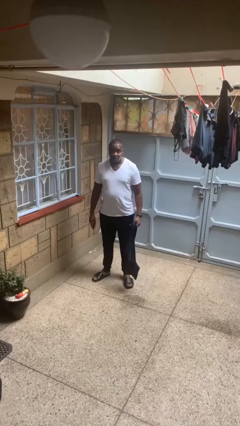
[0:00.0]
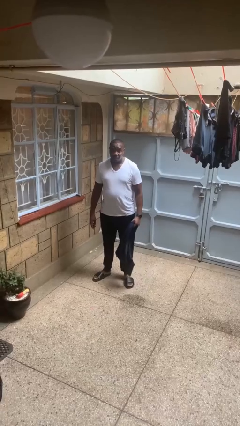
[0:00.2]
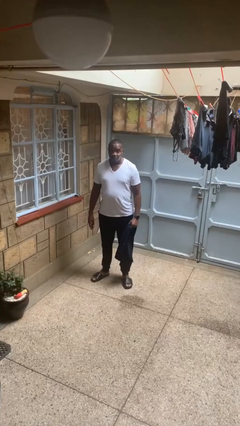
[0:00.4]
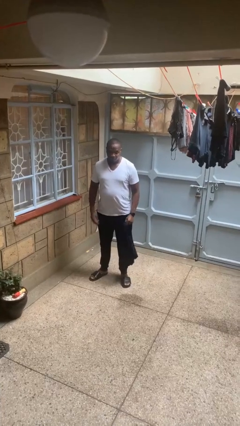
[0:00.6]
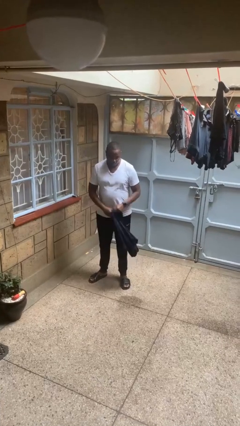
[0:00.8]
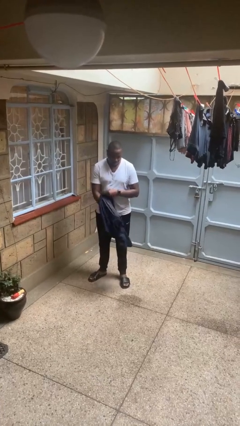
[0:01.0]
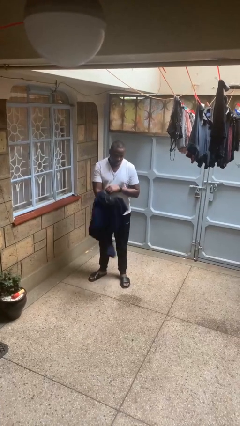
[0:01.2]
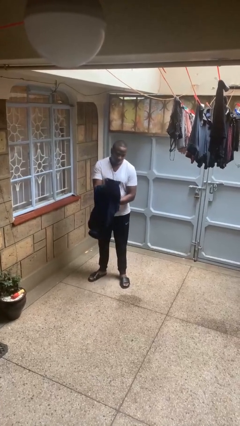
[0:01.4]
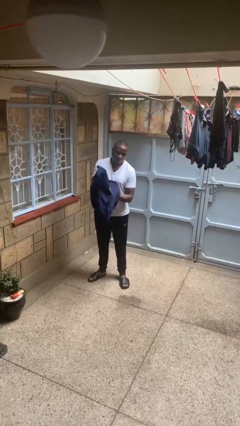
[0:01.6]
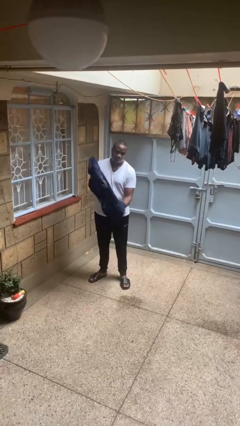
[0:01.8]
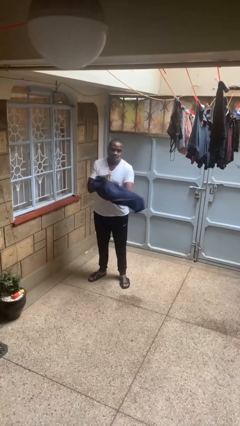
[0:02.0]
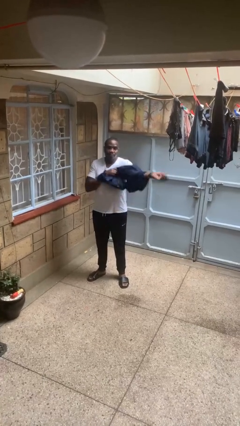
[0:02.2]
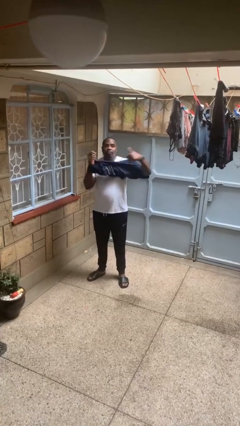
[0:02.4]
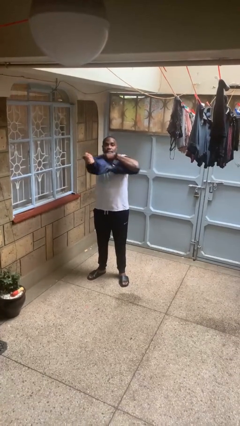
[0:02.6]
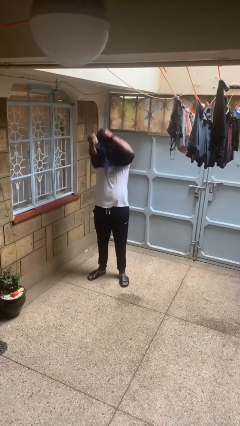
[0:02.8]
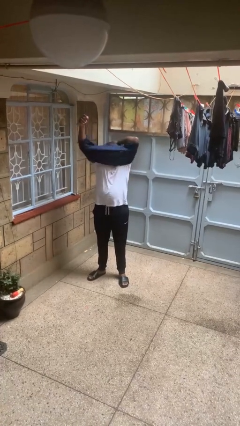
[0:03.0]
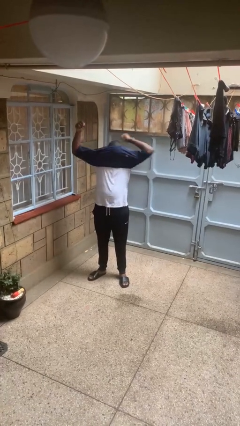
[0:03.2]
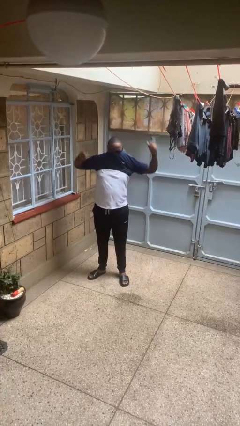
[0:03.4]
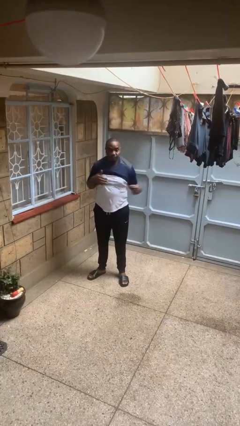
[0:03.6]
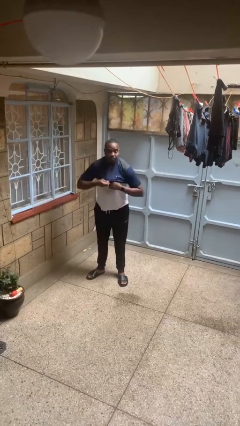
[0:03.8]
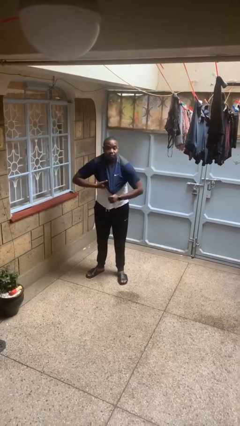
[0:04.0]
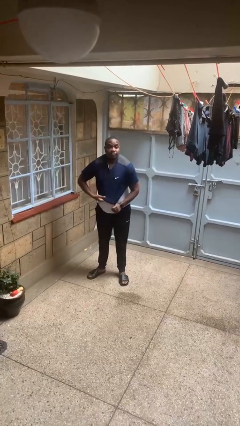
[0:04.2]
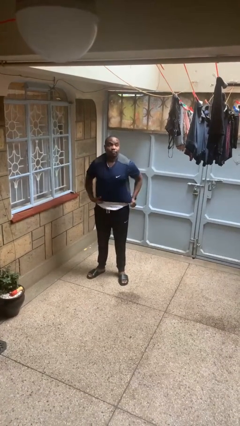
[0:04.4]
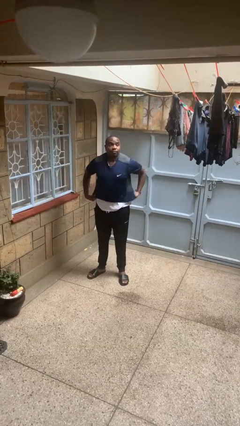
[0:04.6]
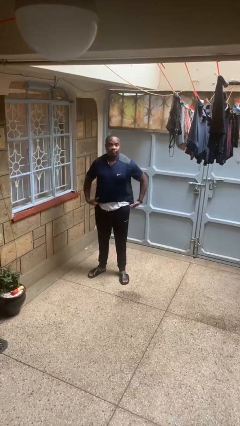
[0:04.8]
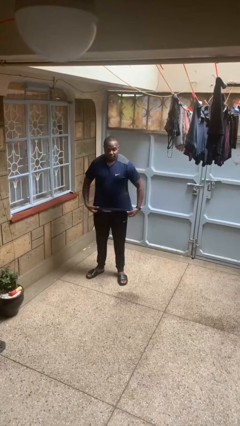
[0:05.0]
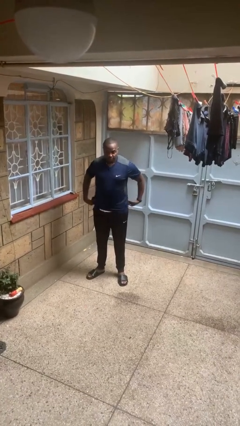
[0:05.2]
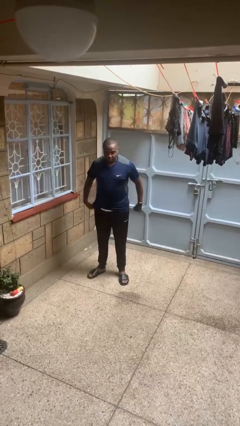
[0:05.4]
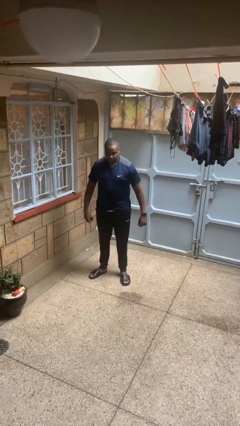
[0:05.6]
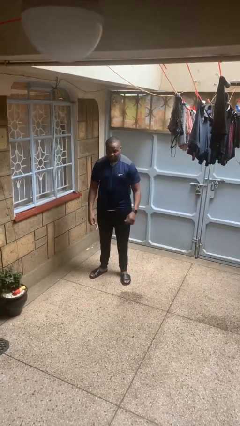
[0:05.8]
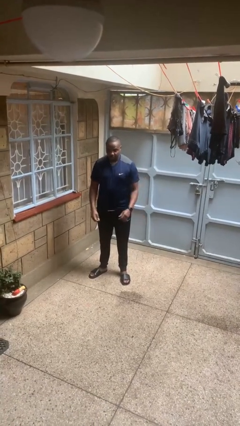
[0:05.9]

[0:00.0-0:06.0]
person puts on shirt

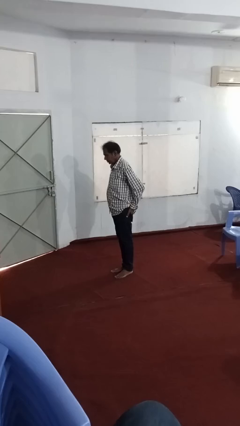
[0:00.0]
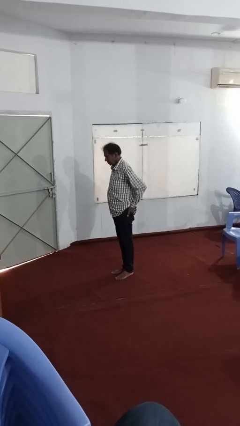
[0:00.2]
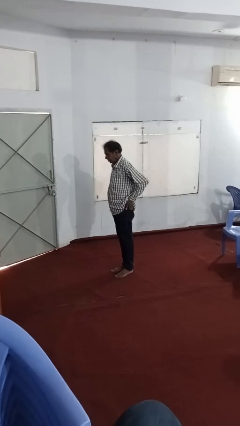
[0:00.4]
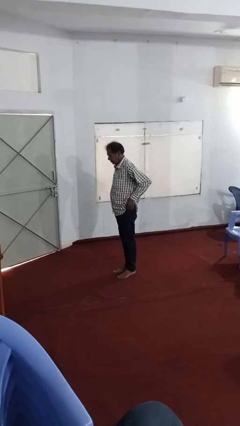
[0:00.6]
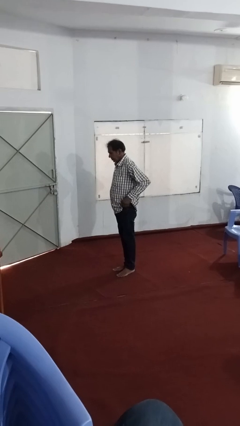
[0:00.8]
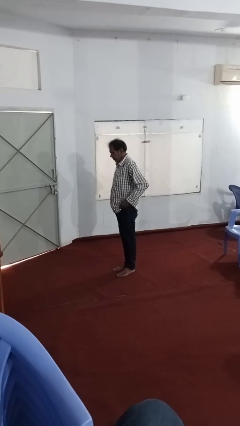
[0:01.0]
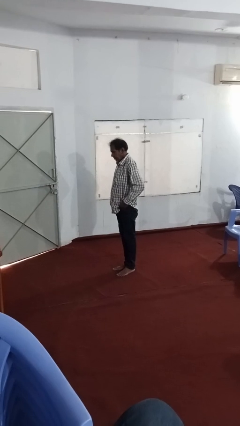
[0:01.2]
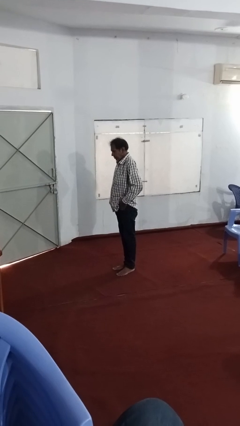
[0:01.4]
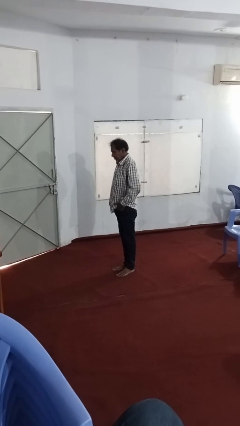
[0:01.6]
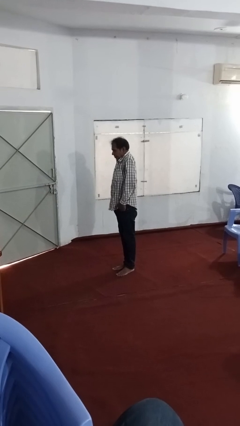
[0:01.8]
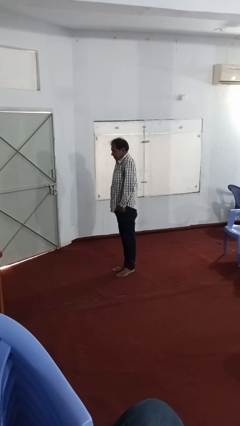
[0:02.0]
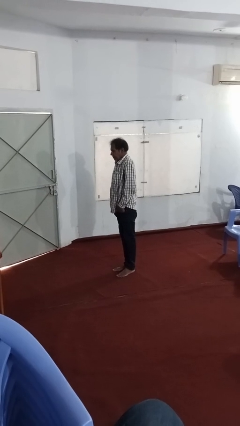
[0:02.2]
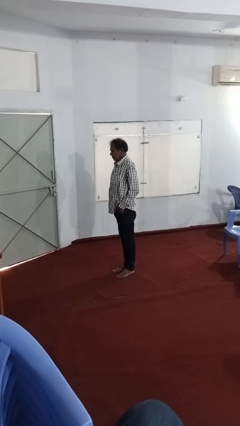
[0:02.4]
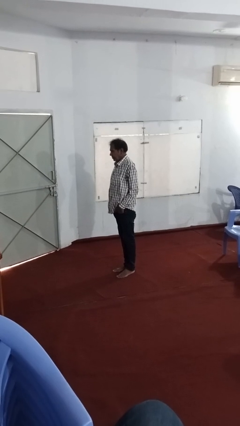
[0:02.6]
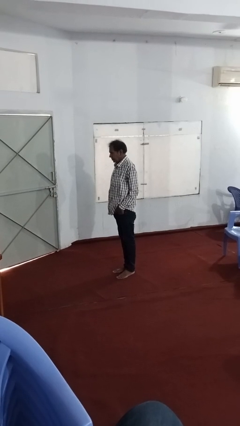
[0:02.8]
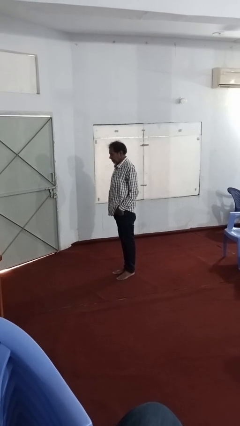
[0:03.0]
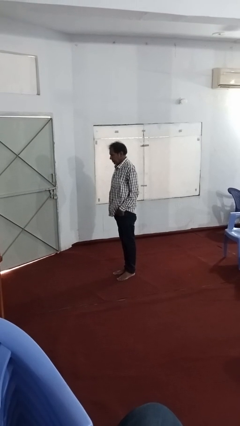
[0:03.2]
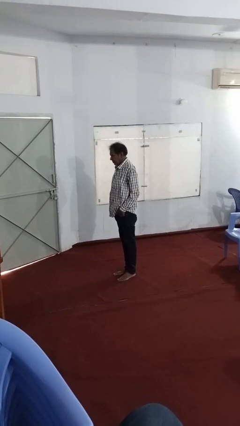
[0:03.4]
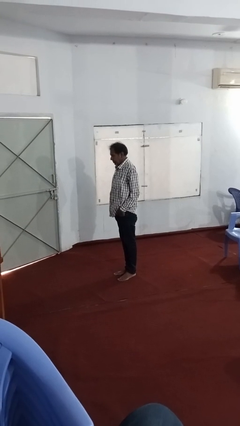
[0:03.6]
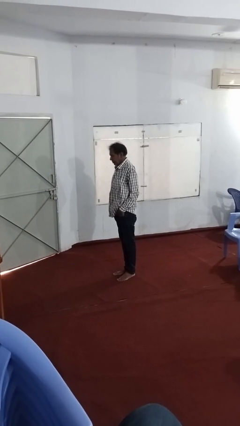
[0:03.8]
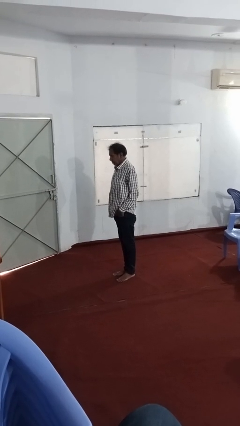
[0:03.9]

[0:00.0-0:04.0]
person puts hands in back pockets

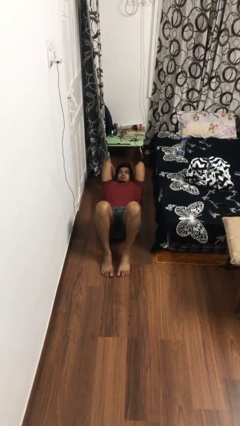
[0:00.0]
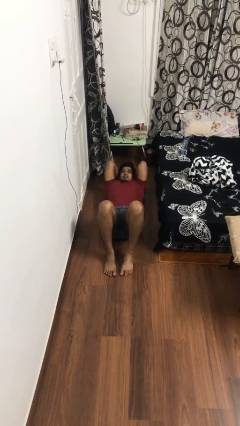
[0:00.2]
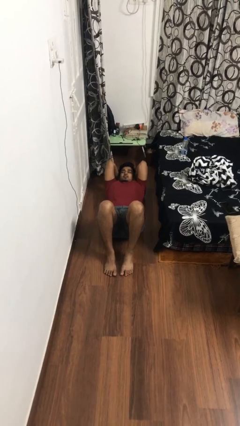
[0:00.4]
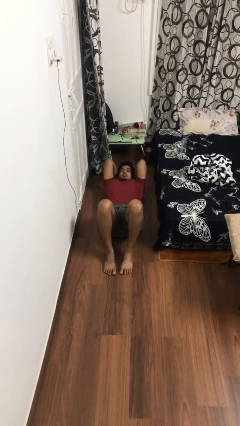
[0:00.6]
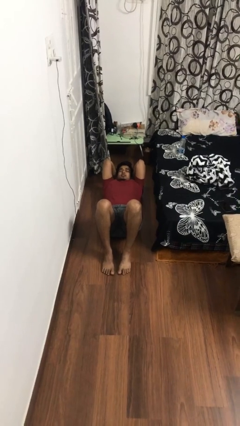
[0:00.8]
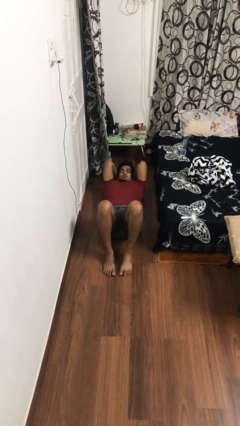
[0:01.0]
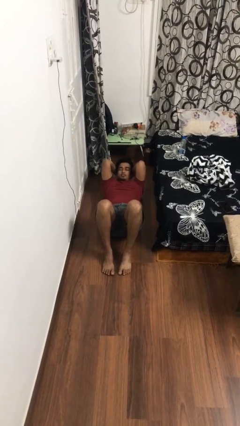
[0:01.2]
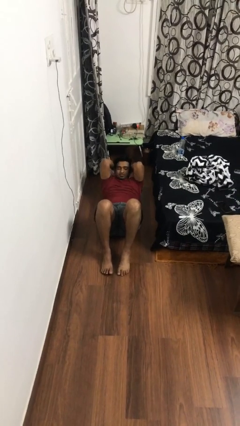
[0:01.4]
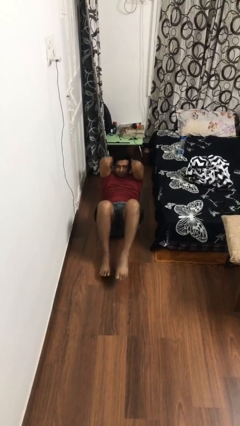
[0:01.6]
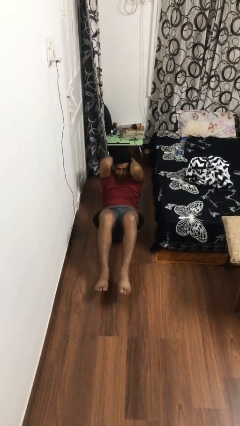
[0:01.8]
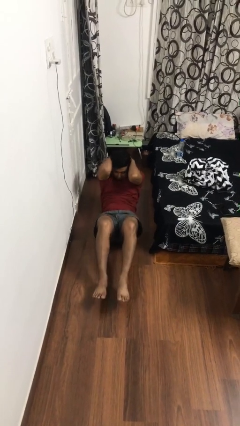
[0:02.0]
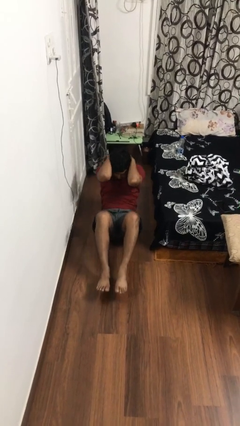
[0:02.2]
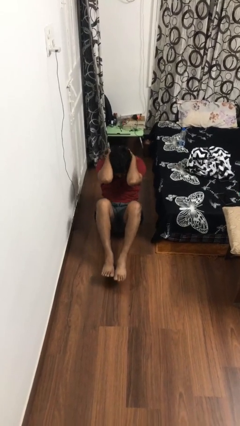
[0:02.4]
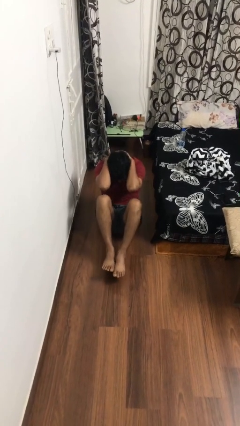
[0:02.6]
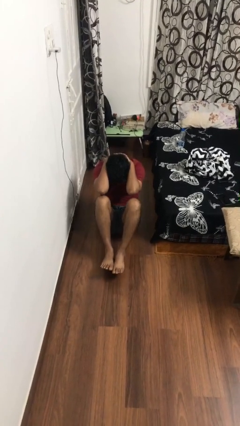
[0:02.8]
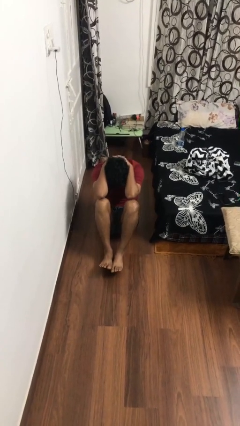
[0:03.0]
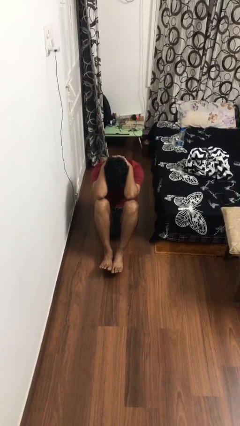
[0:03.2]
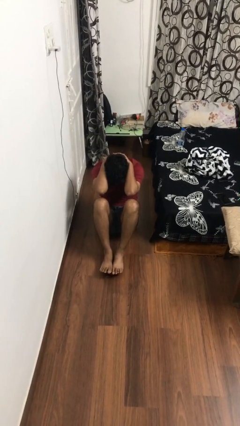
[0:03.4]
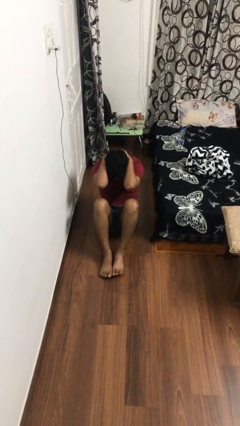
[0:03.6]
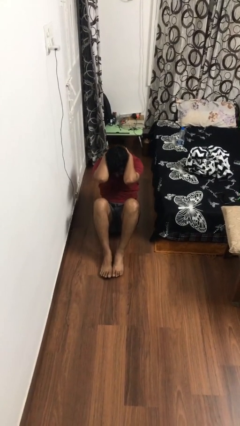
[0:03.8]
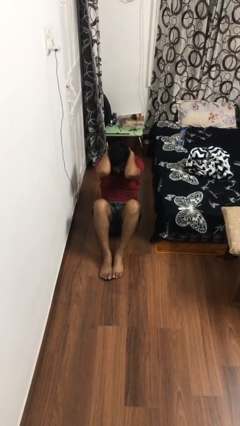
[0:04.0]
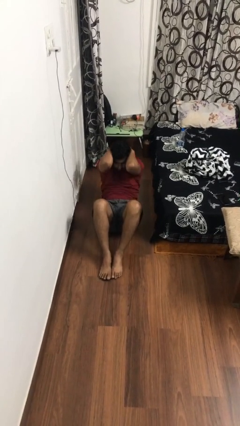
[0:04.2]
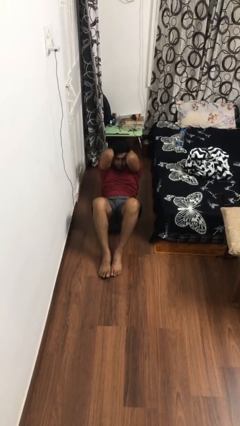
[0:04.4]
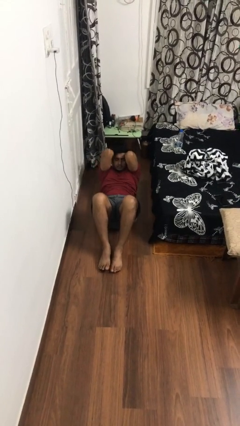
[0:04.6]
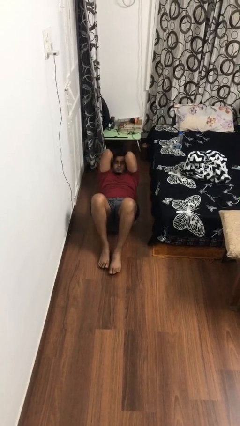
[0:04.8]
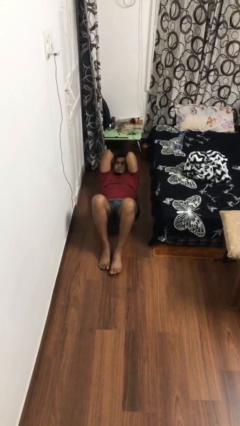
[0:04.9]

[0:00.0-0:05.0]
person exercises with situp

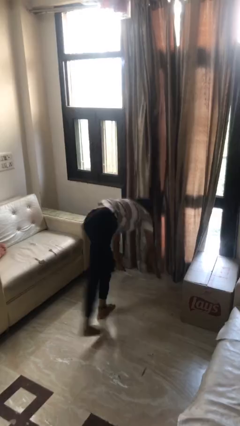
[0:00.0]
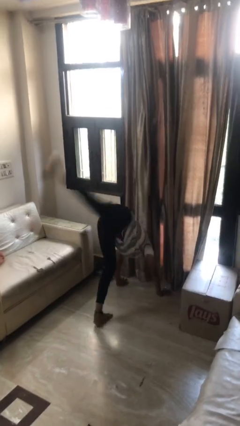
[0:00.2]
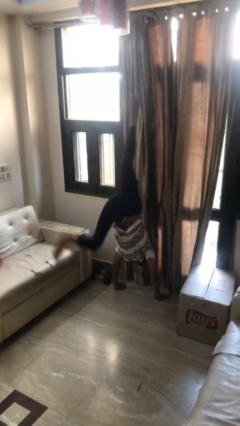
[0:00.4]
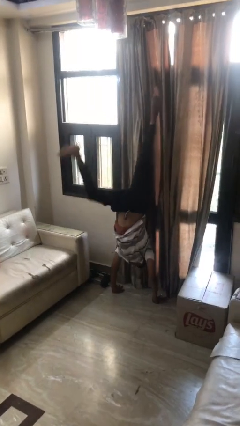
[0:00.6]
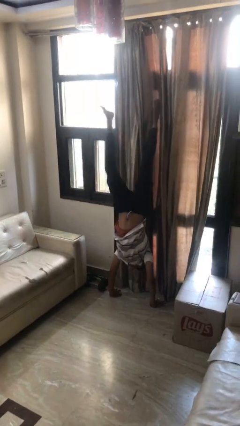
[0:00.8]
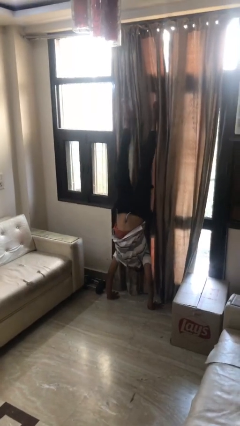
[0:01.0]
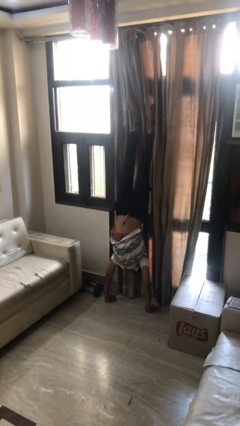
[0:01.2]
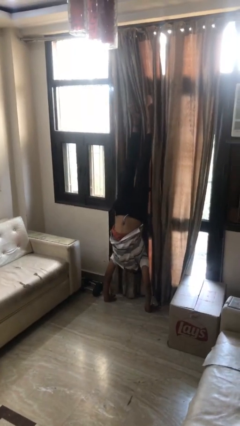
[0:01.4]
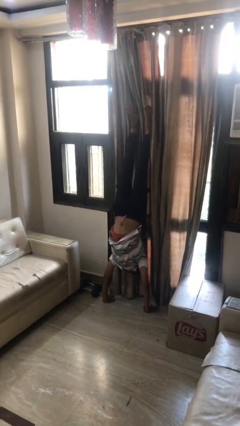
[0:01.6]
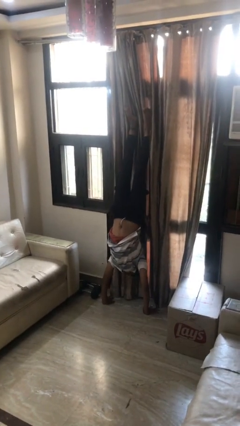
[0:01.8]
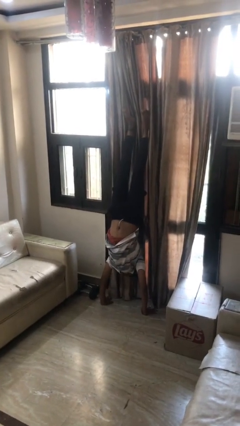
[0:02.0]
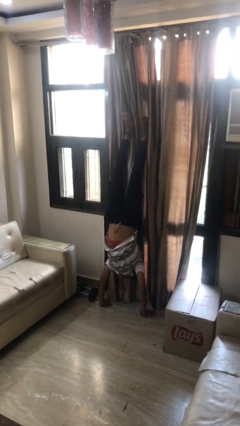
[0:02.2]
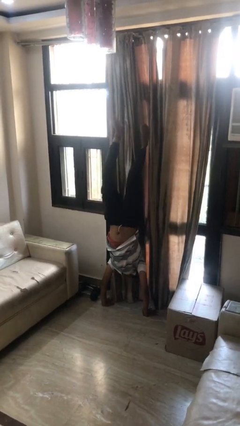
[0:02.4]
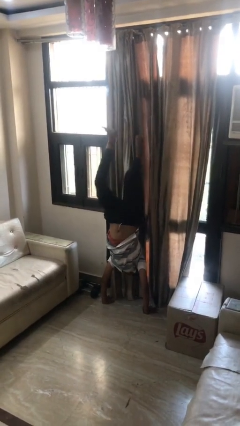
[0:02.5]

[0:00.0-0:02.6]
person handstand
